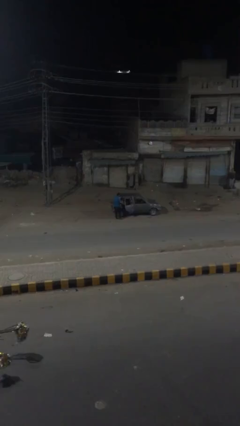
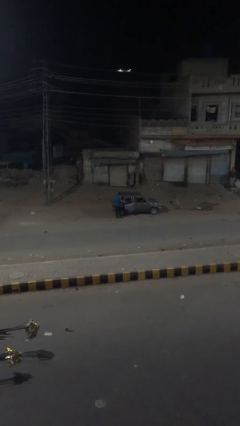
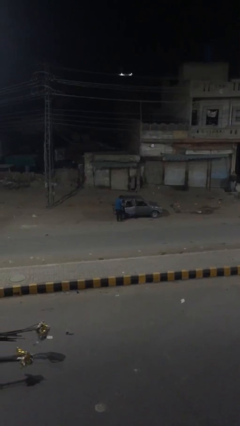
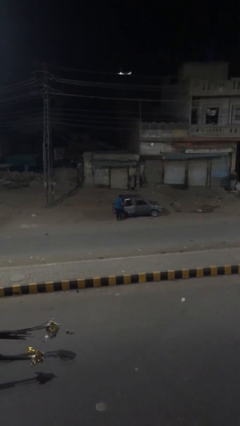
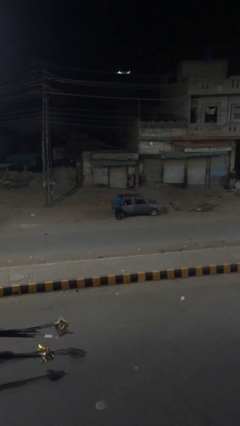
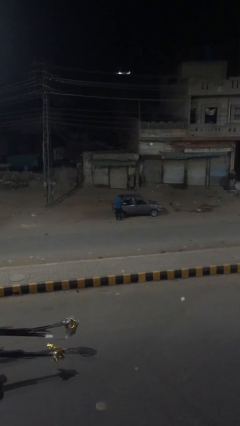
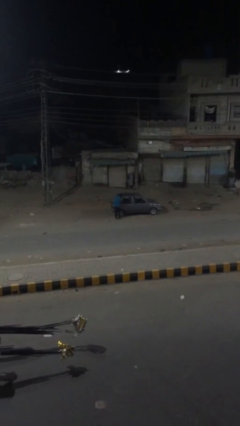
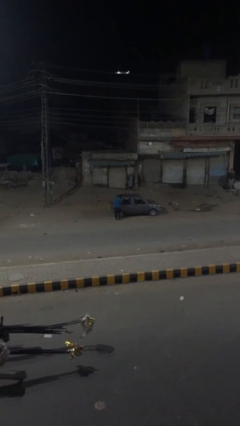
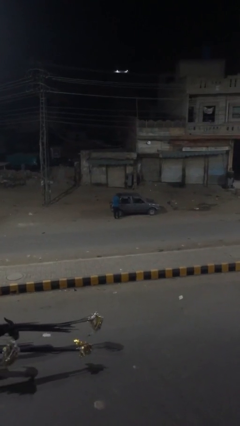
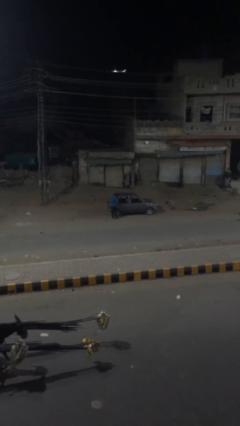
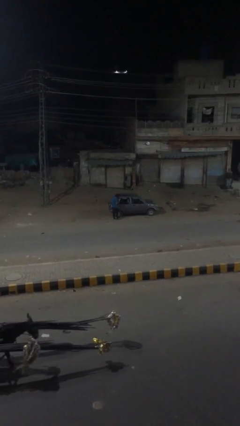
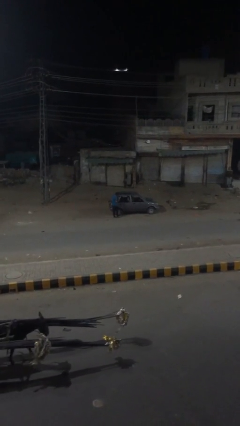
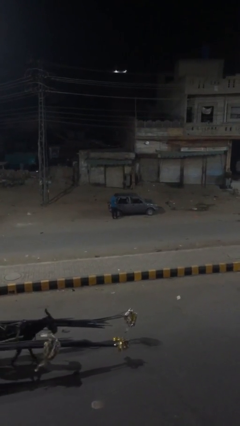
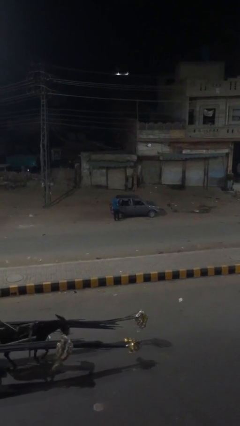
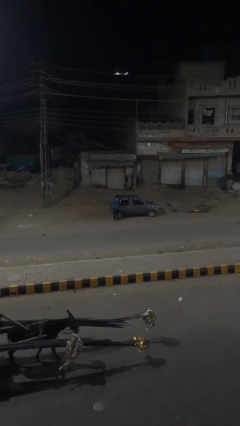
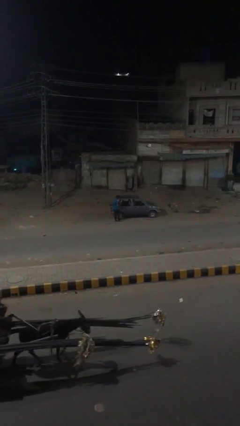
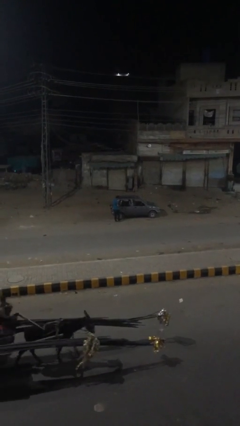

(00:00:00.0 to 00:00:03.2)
person closes car door

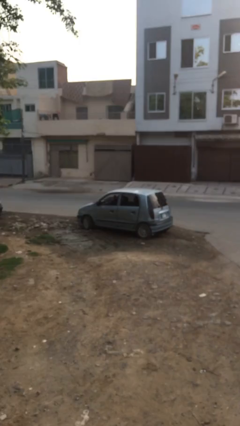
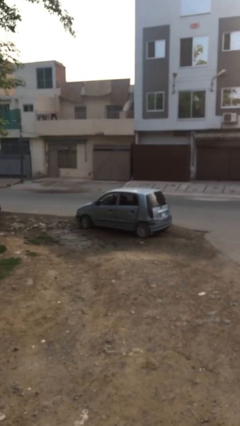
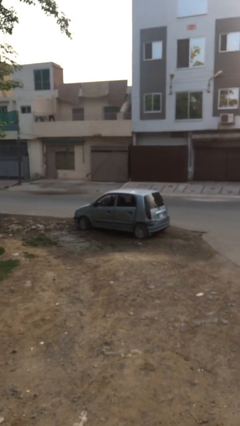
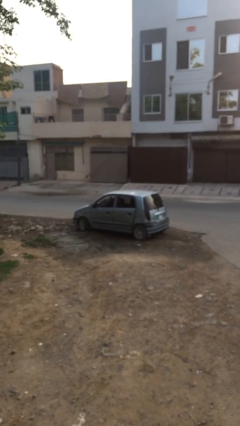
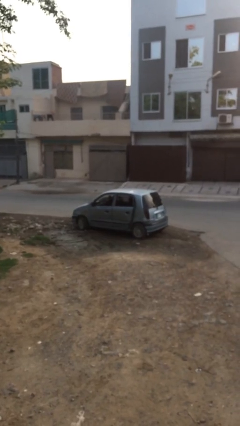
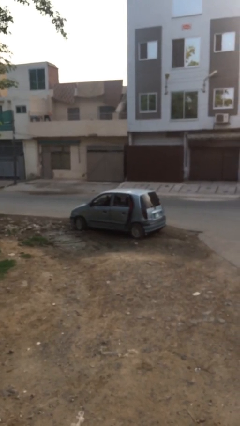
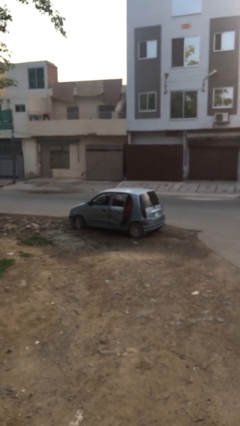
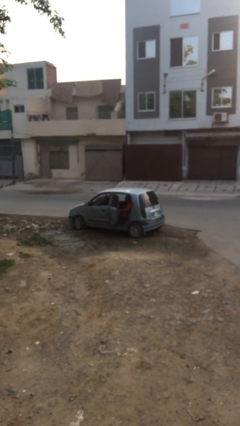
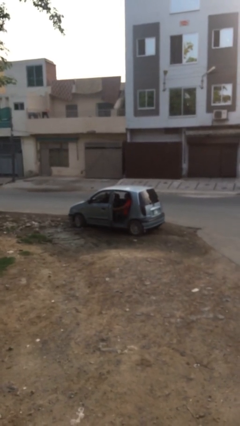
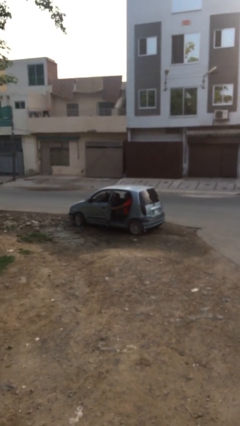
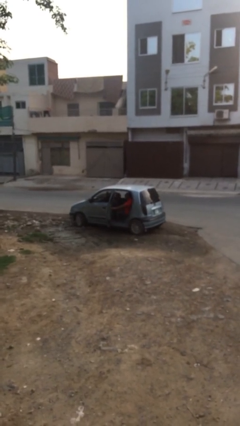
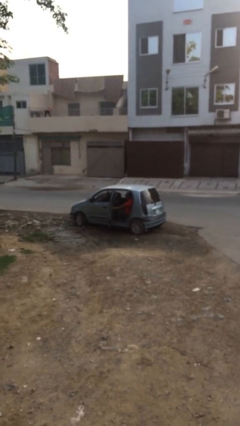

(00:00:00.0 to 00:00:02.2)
person opens car door

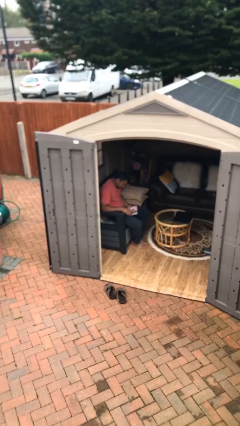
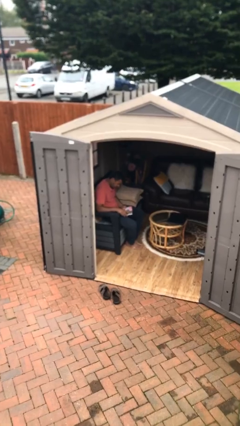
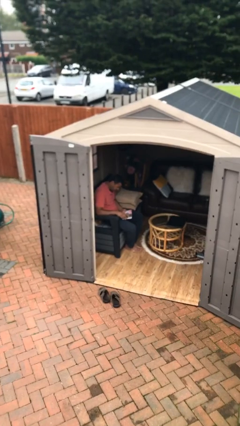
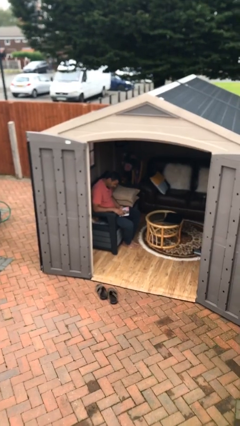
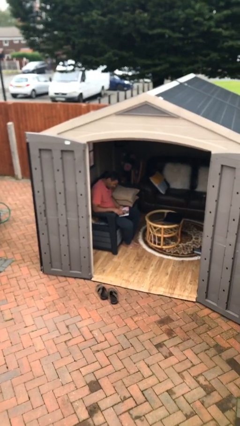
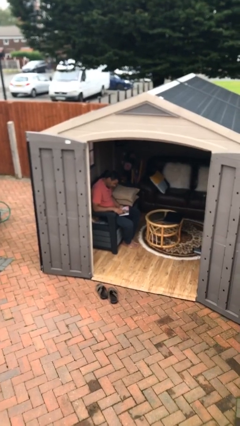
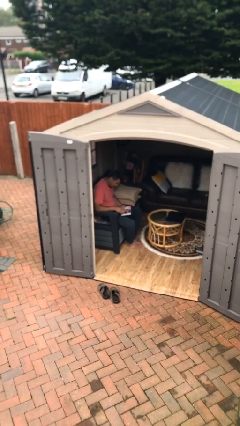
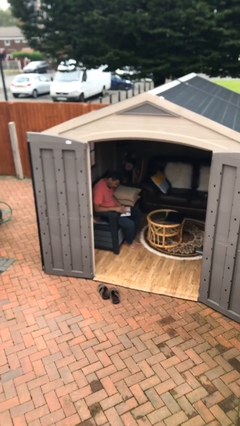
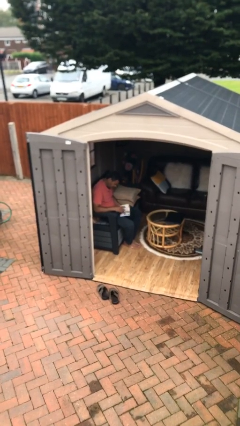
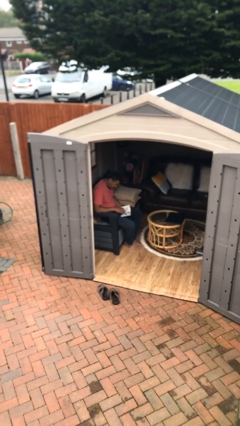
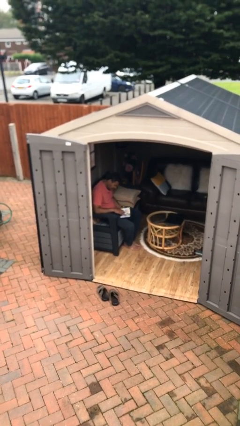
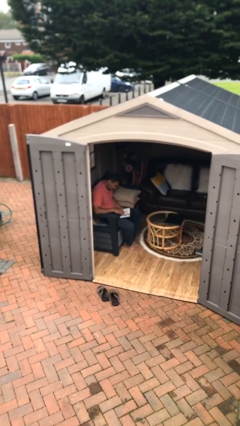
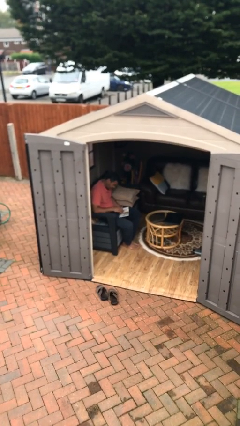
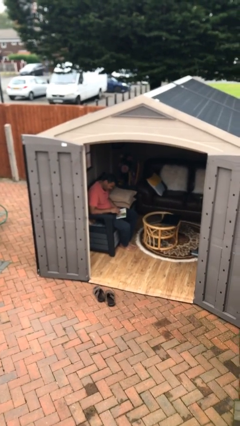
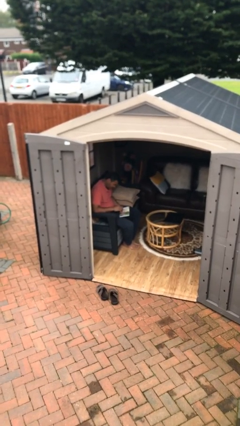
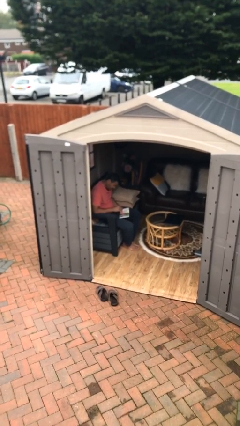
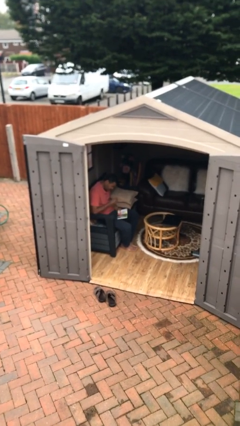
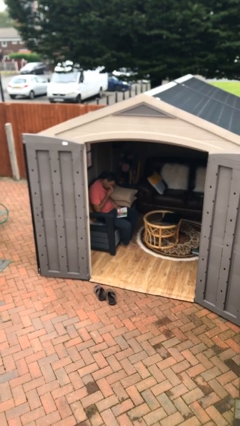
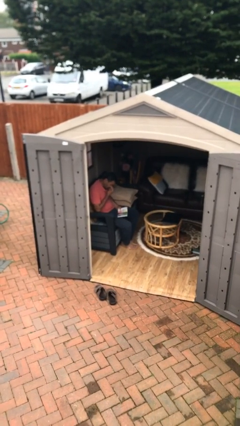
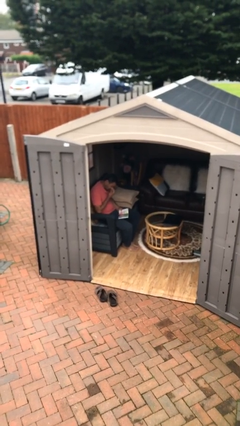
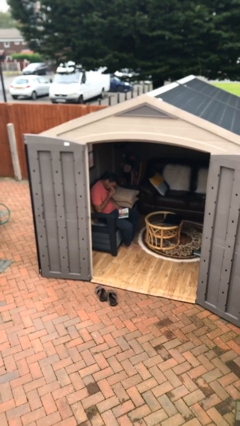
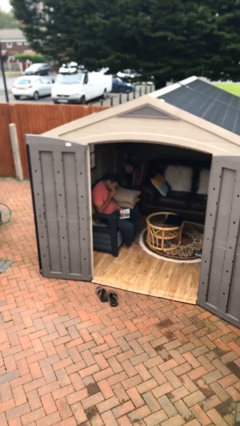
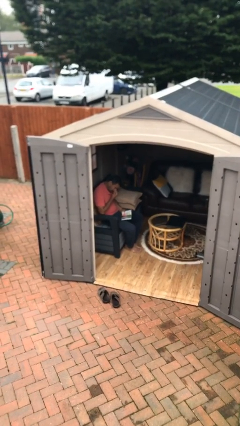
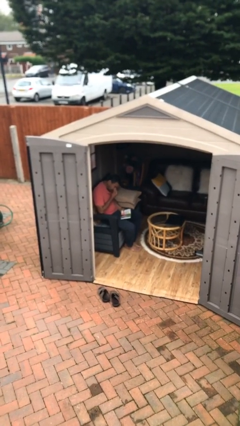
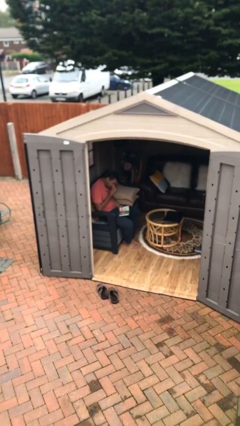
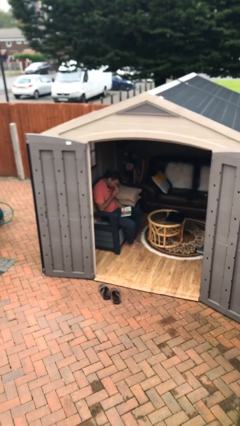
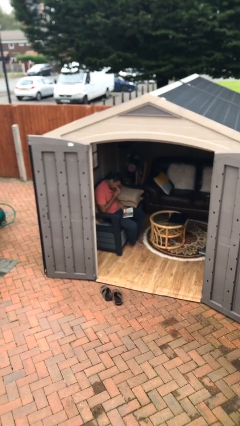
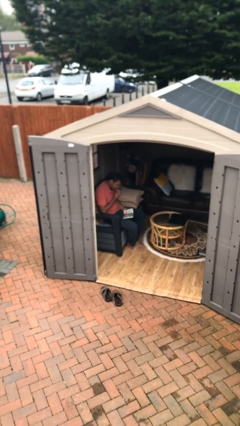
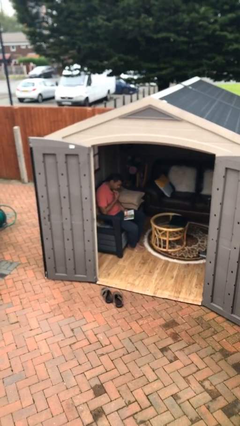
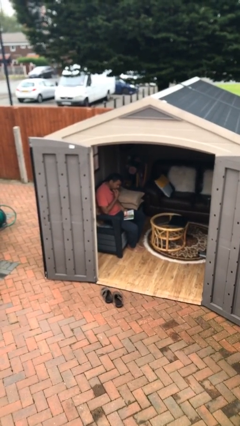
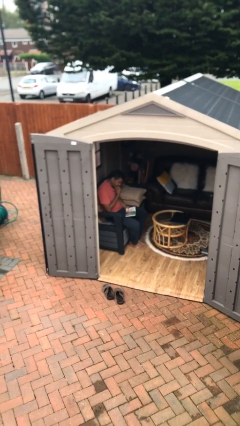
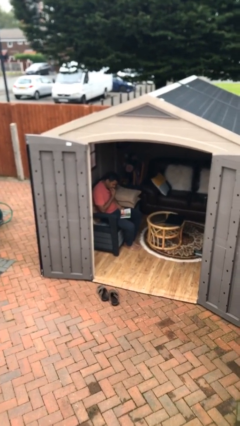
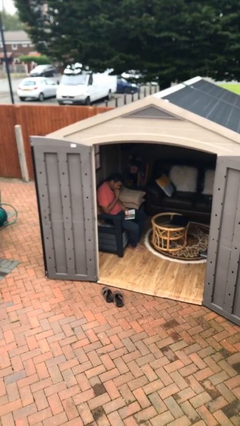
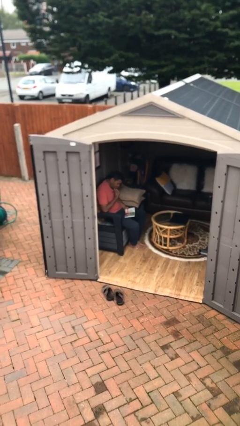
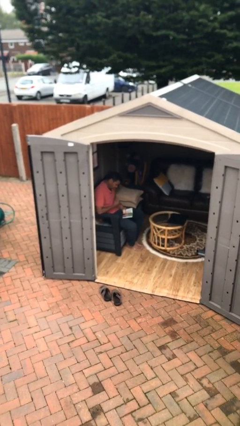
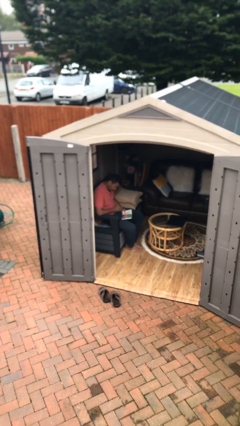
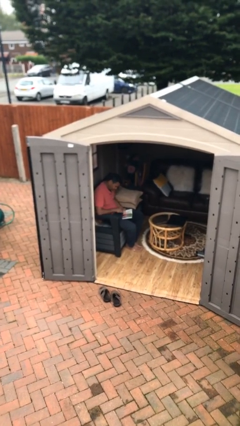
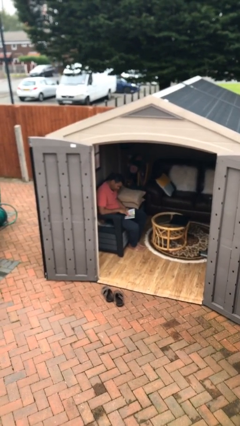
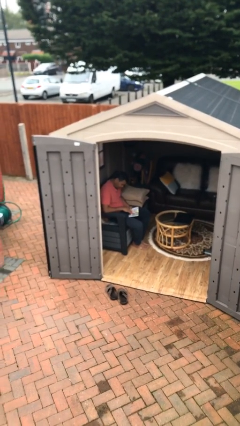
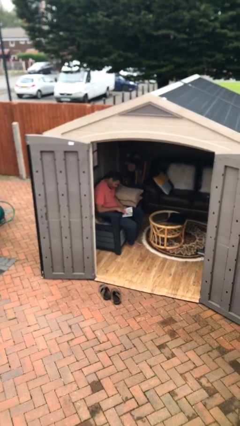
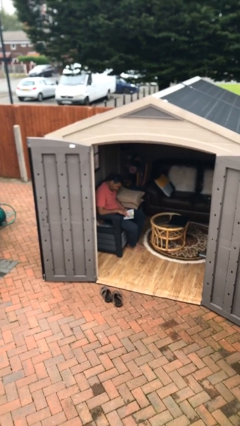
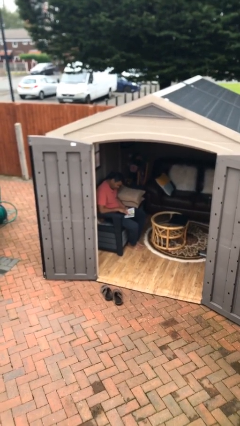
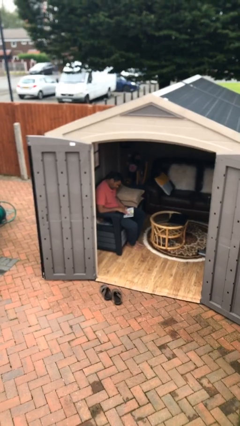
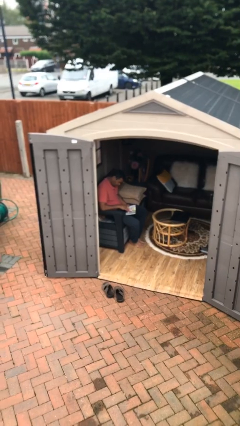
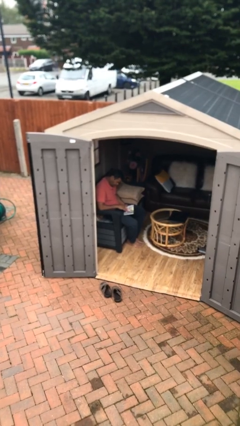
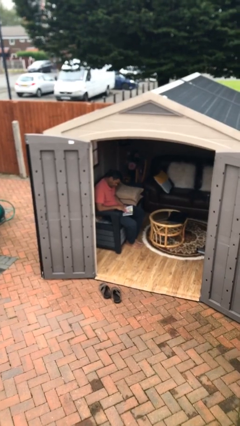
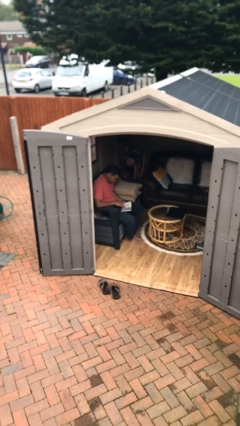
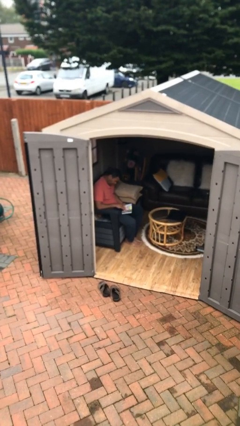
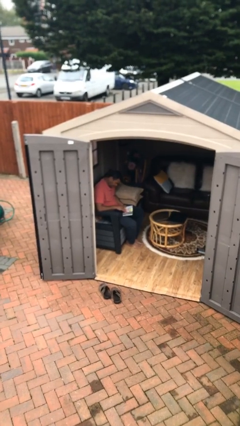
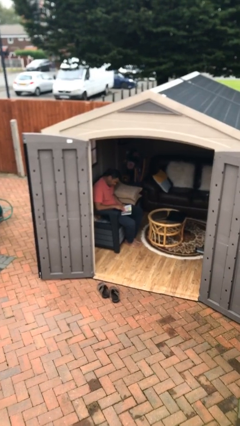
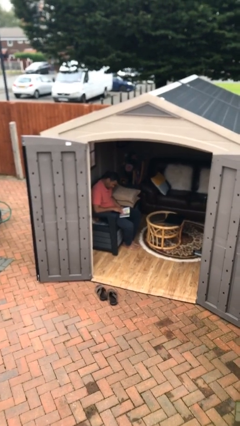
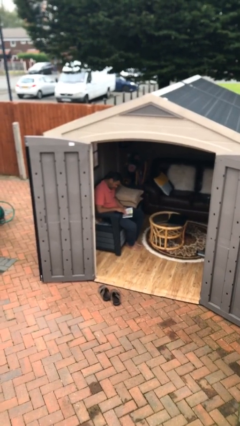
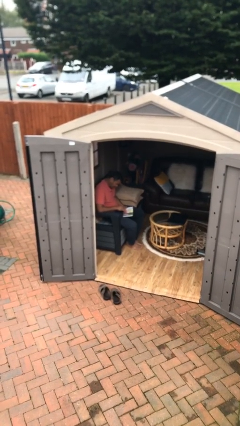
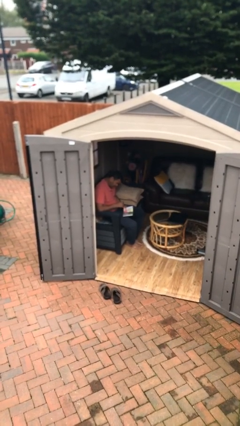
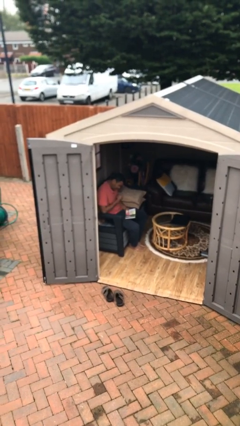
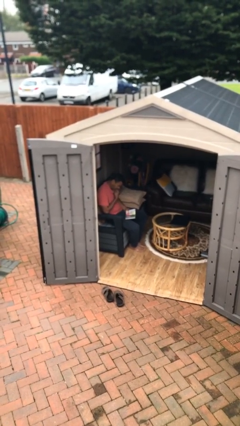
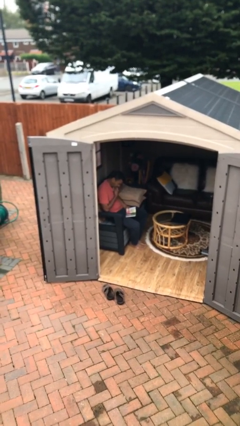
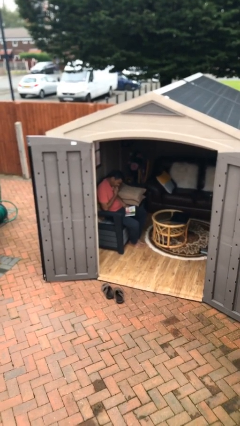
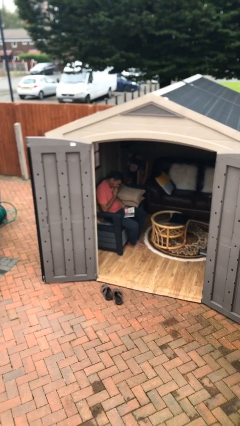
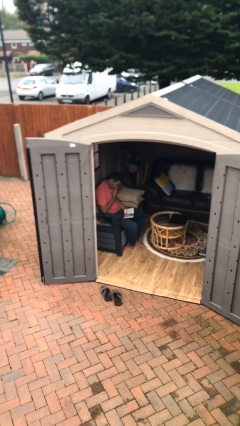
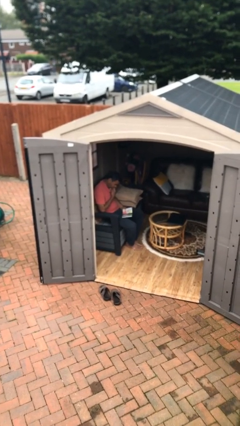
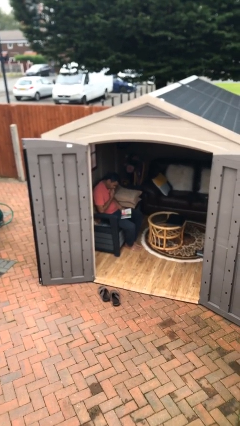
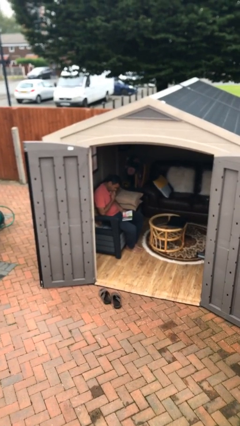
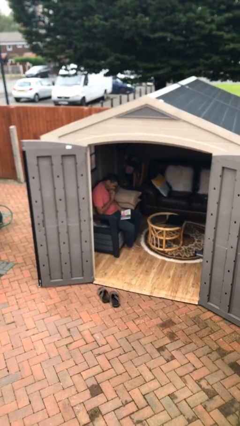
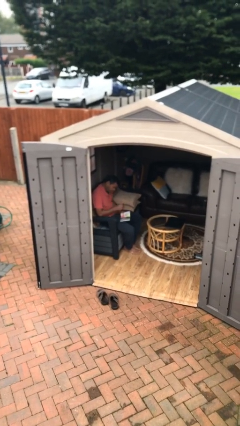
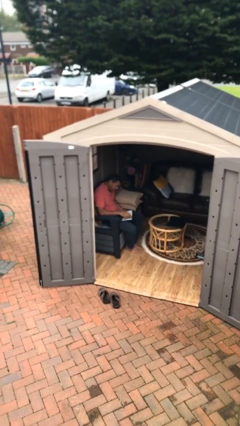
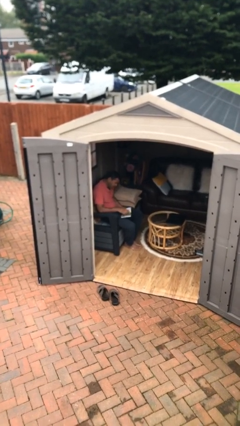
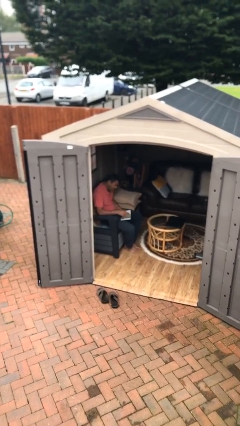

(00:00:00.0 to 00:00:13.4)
person reads document
